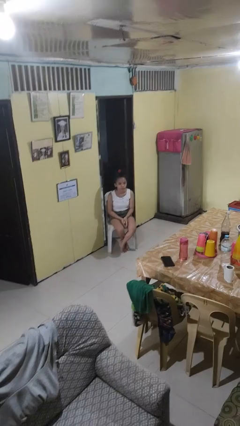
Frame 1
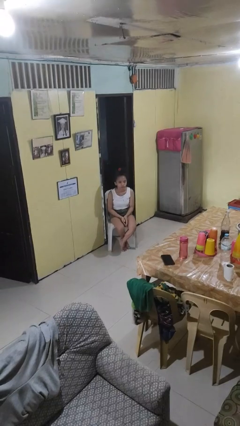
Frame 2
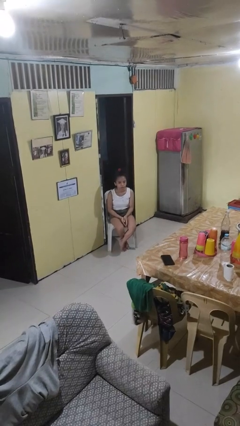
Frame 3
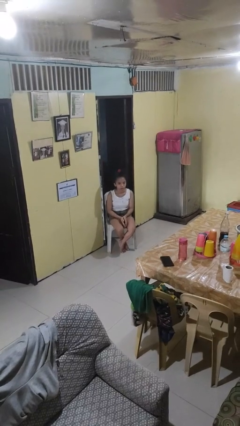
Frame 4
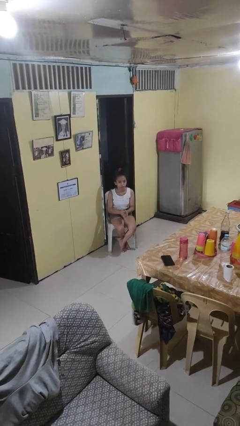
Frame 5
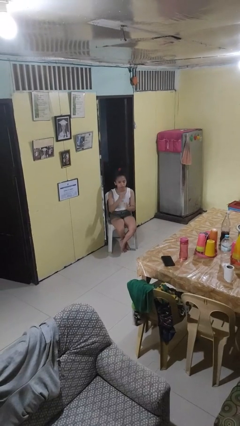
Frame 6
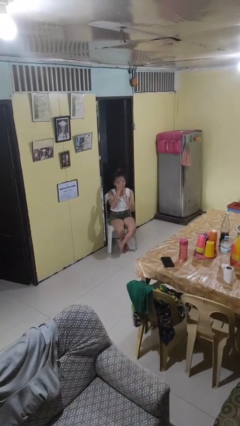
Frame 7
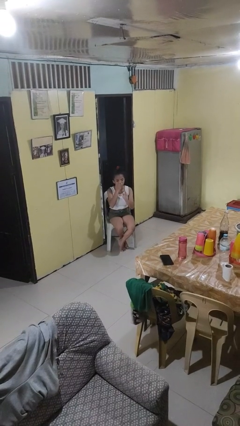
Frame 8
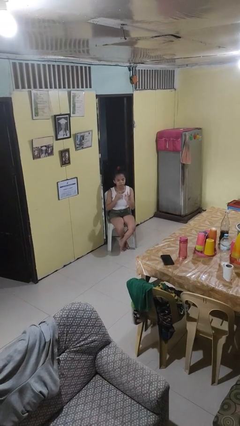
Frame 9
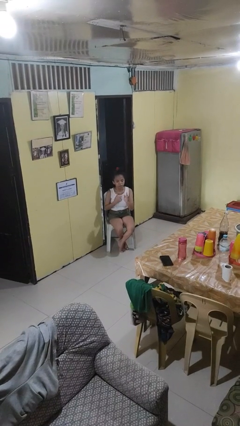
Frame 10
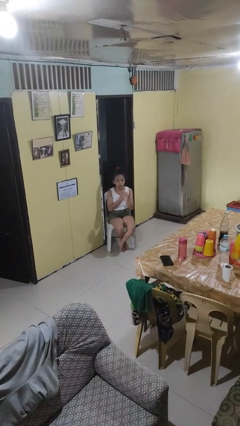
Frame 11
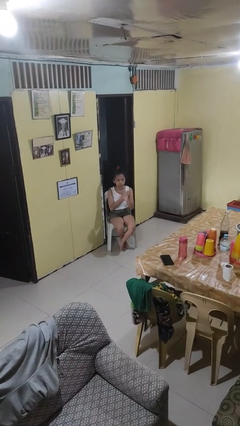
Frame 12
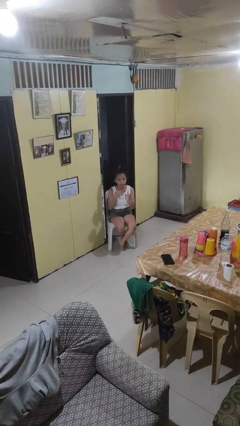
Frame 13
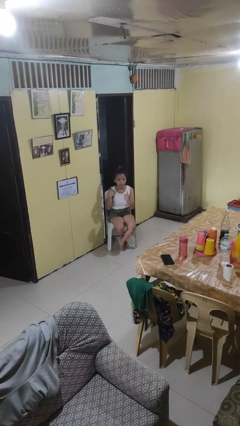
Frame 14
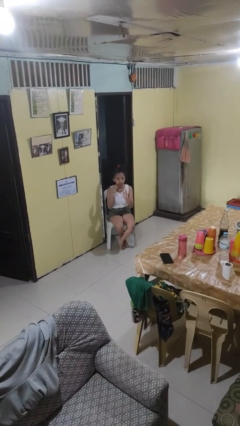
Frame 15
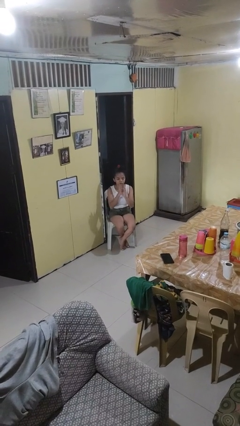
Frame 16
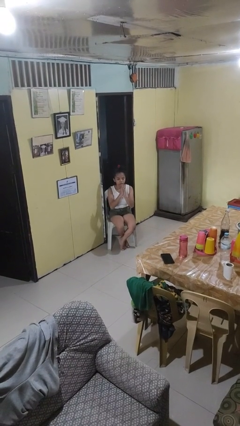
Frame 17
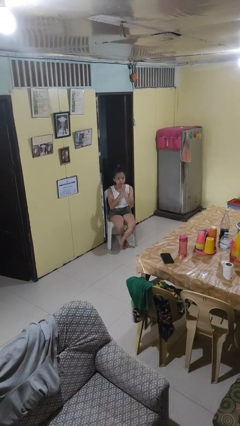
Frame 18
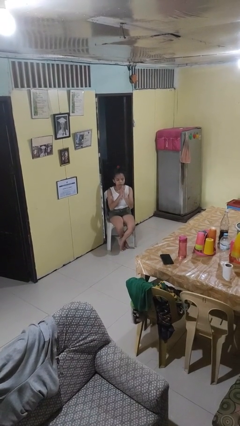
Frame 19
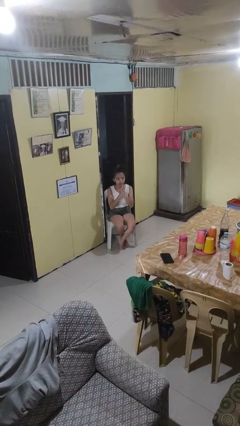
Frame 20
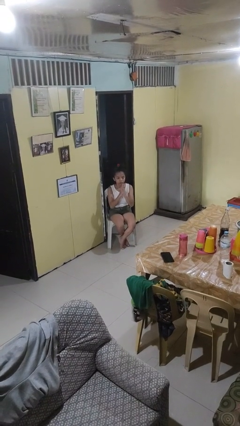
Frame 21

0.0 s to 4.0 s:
person prays

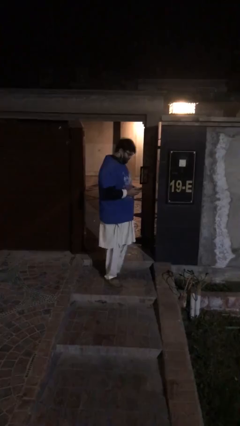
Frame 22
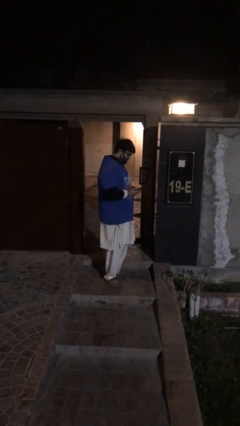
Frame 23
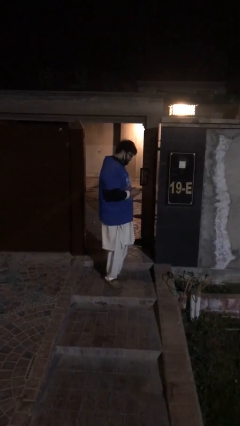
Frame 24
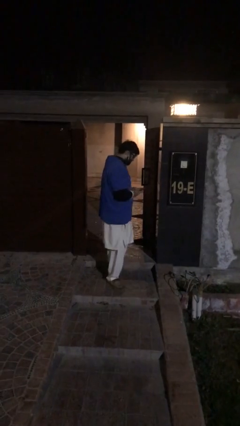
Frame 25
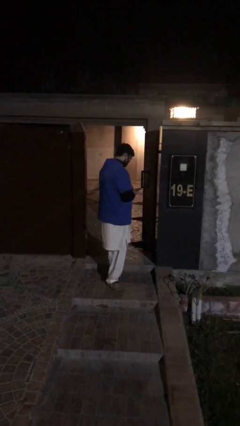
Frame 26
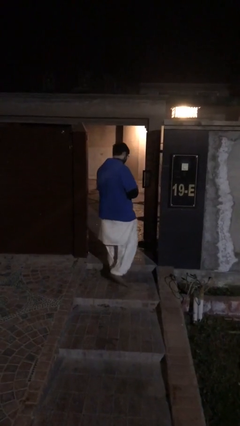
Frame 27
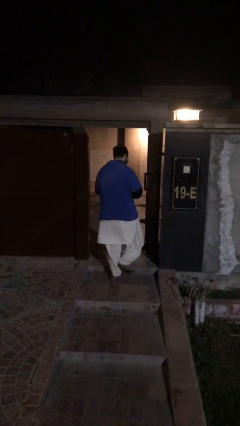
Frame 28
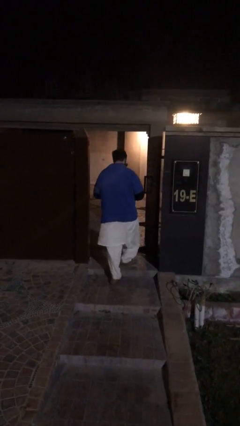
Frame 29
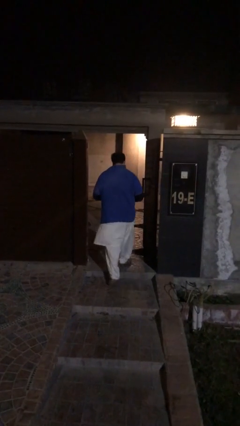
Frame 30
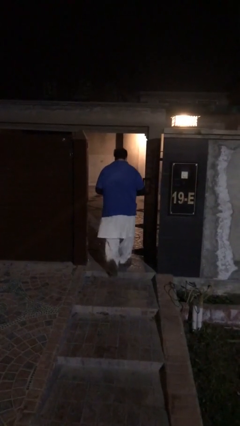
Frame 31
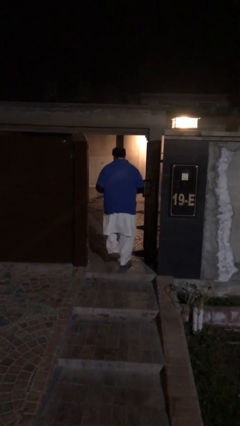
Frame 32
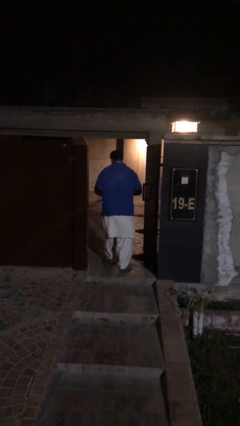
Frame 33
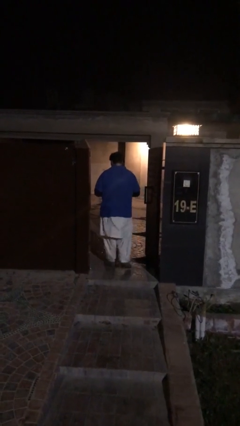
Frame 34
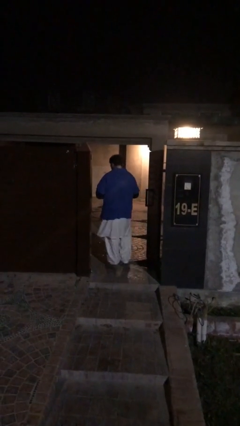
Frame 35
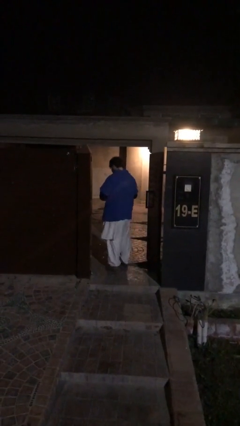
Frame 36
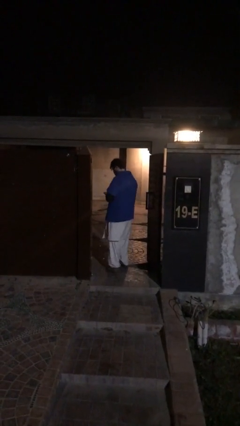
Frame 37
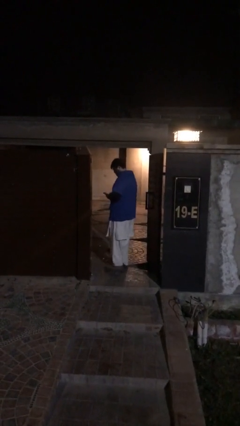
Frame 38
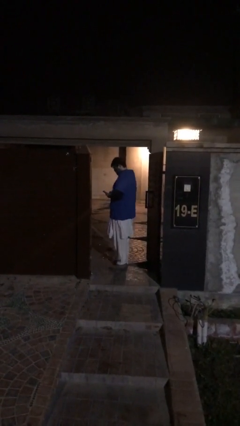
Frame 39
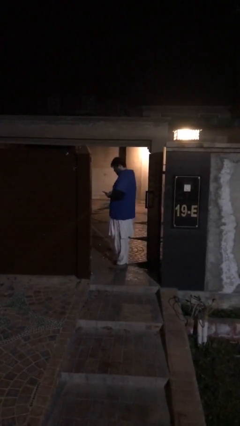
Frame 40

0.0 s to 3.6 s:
person exits scene through structure

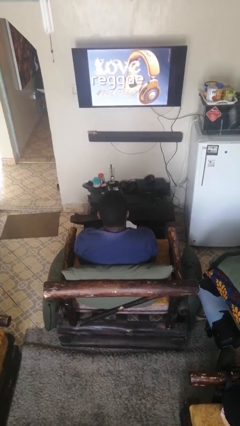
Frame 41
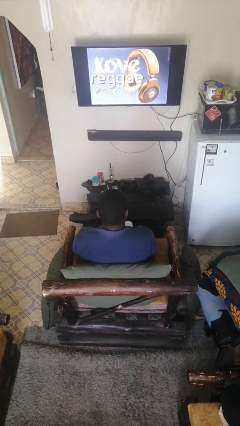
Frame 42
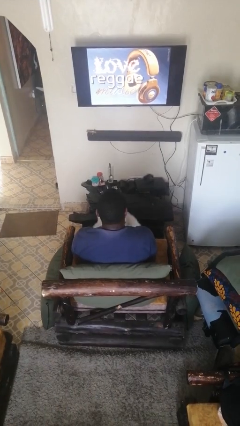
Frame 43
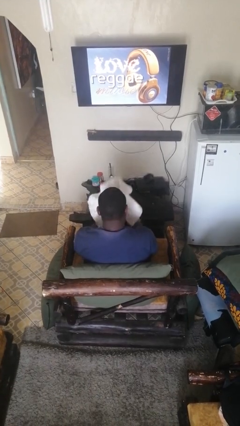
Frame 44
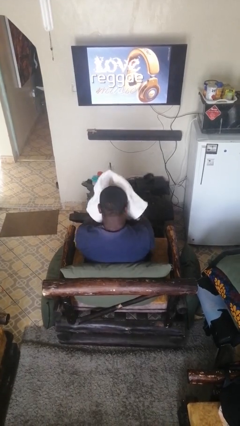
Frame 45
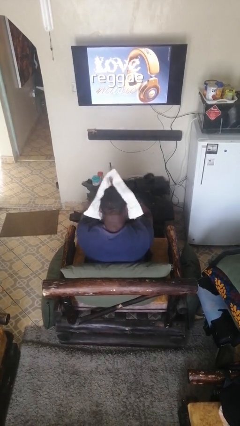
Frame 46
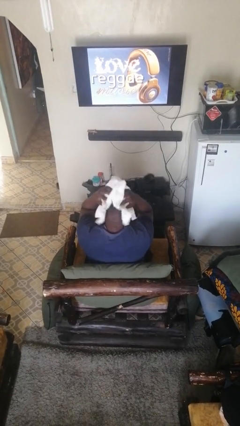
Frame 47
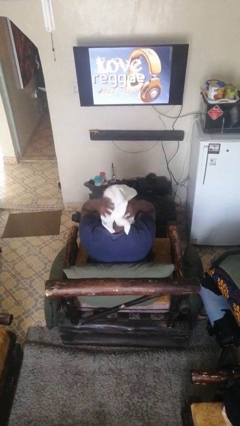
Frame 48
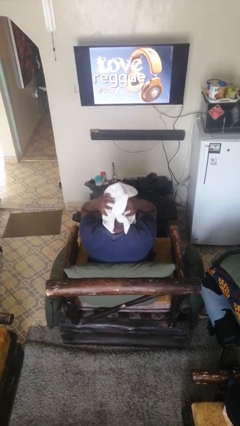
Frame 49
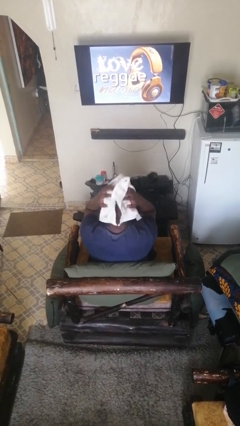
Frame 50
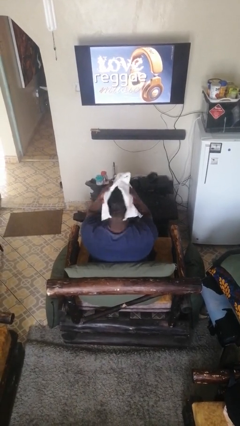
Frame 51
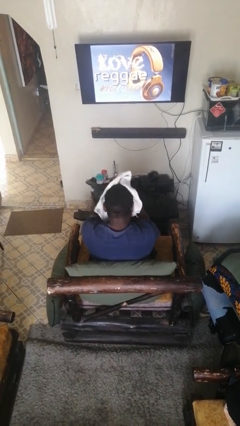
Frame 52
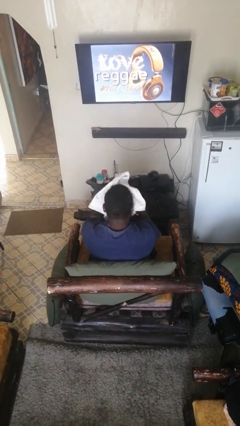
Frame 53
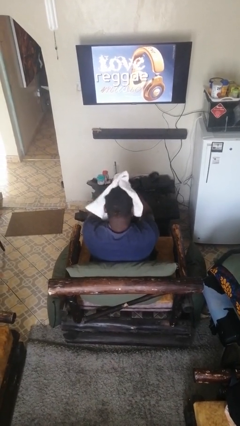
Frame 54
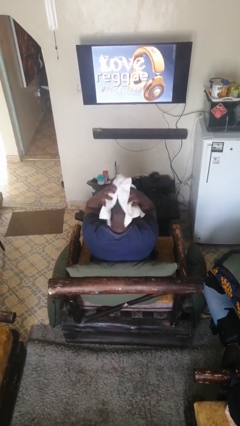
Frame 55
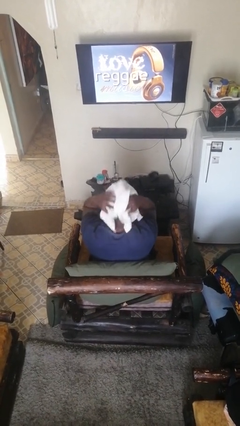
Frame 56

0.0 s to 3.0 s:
person dries hair with towel

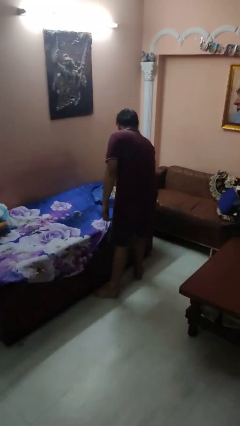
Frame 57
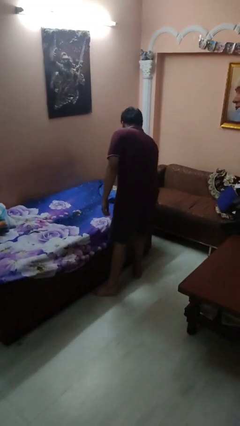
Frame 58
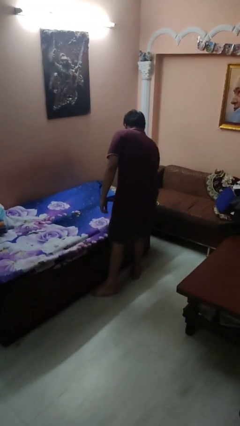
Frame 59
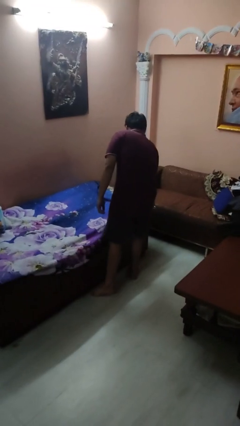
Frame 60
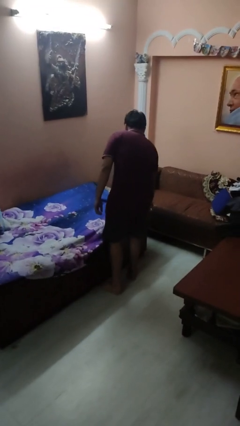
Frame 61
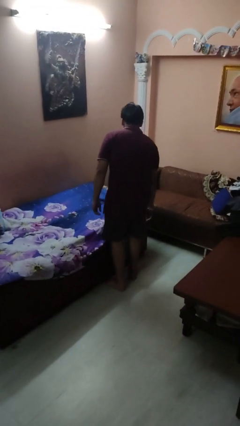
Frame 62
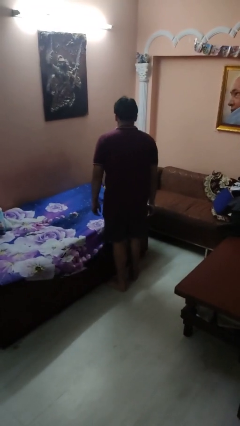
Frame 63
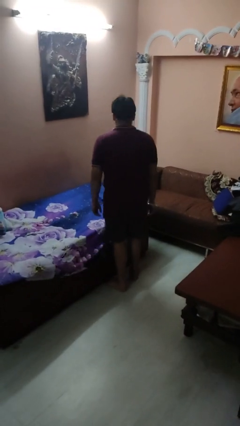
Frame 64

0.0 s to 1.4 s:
person makes bed

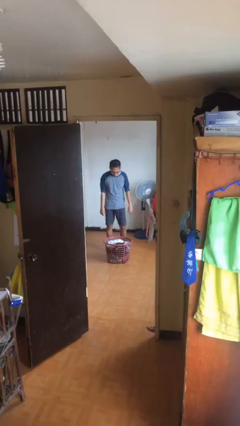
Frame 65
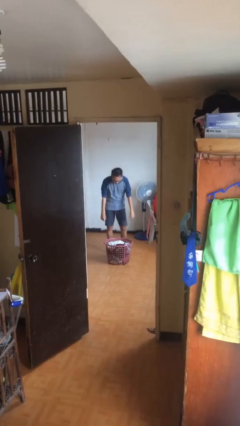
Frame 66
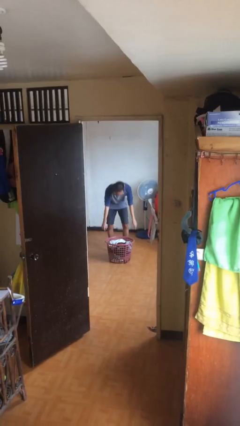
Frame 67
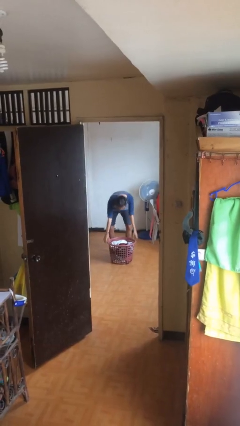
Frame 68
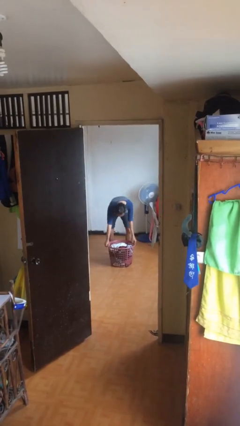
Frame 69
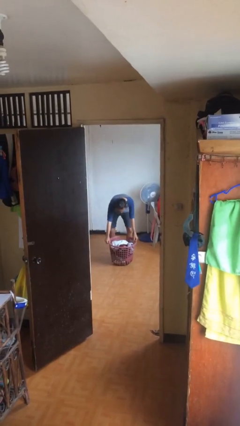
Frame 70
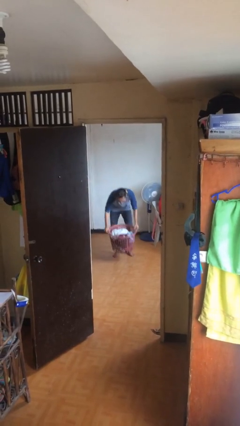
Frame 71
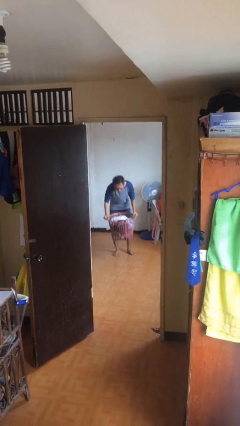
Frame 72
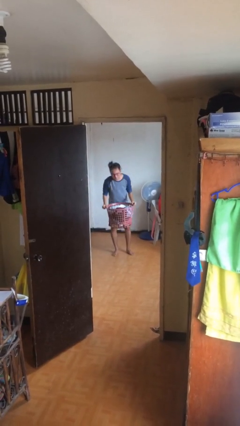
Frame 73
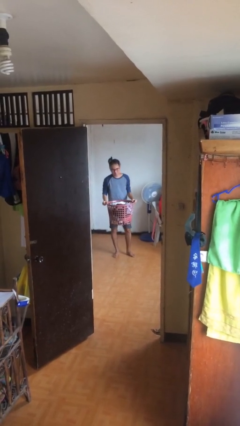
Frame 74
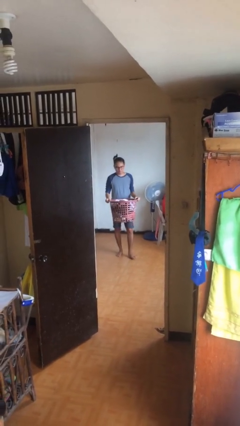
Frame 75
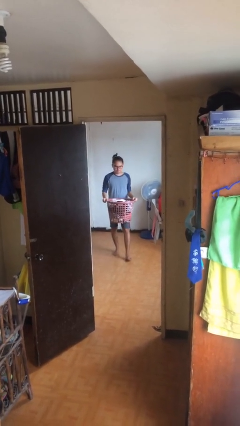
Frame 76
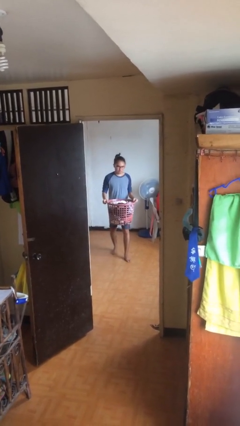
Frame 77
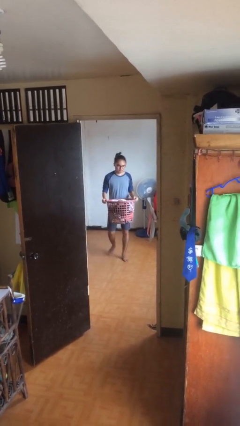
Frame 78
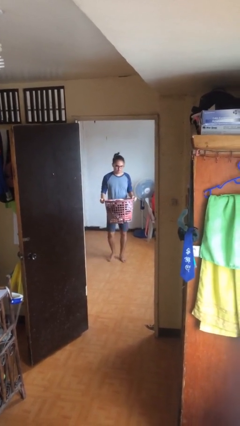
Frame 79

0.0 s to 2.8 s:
person picks up object from floor

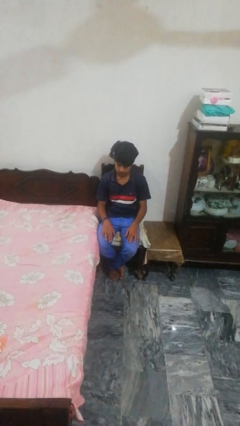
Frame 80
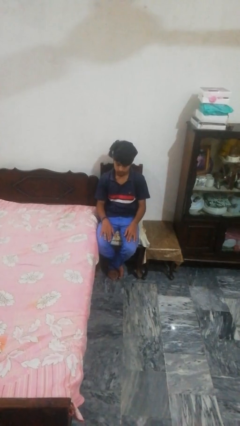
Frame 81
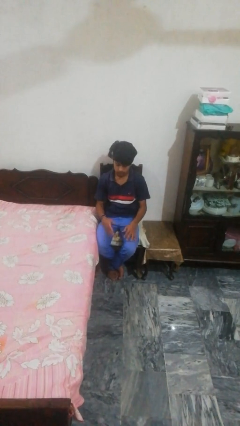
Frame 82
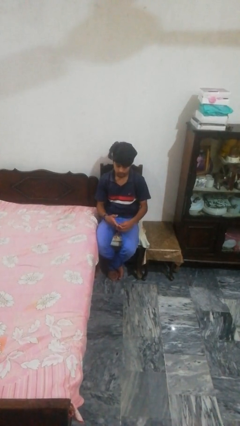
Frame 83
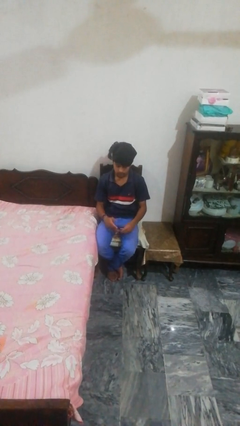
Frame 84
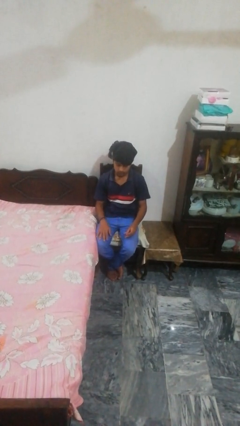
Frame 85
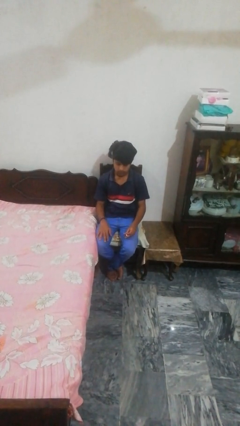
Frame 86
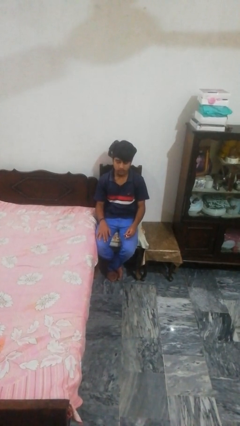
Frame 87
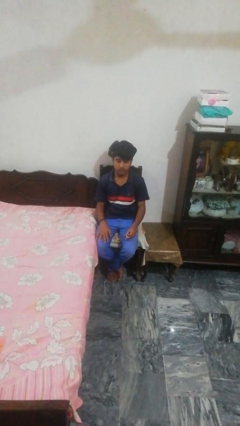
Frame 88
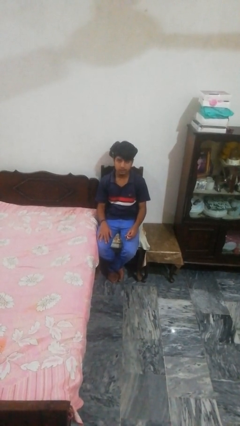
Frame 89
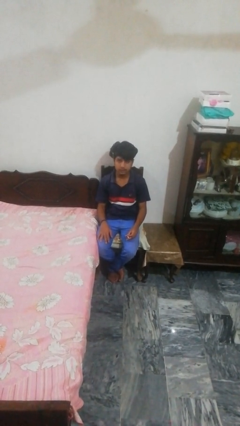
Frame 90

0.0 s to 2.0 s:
person takes off ring

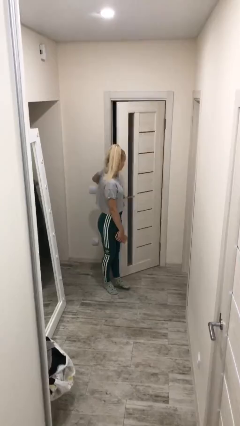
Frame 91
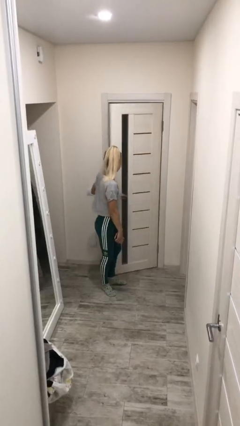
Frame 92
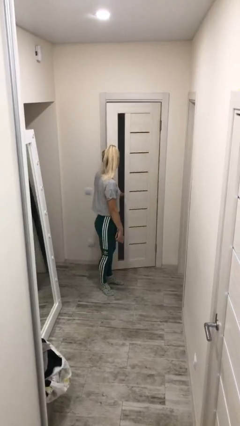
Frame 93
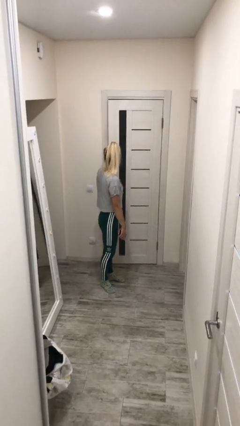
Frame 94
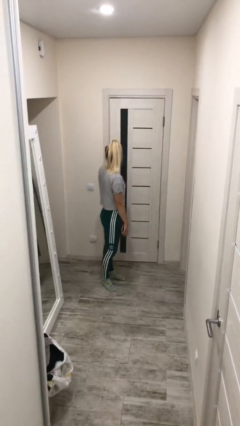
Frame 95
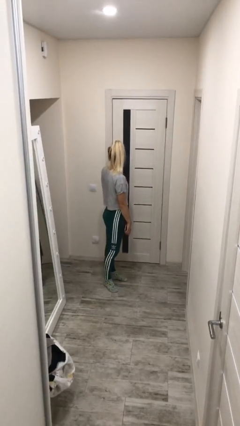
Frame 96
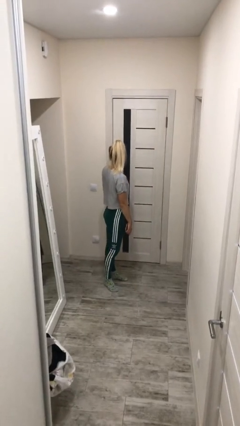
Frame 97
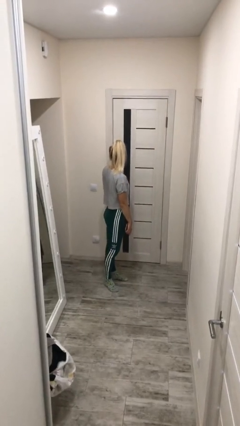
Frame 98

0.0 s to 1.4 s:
person closes facility door
